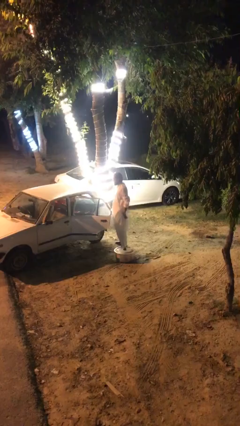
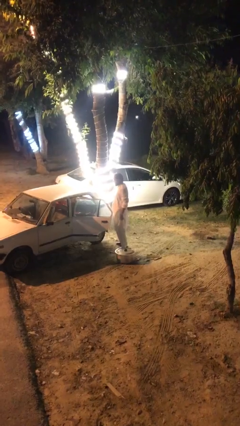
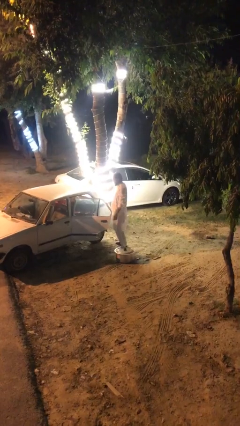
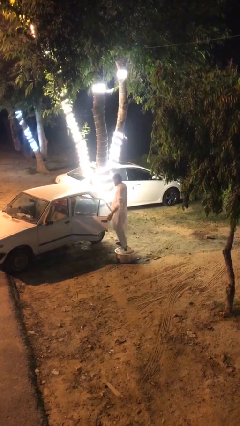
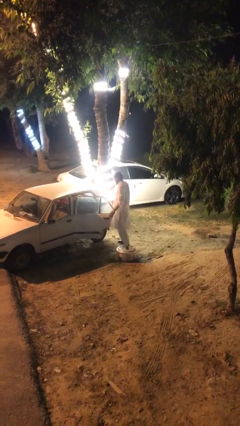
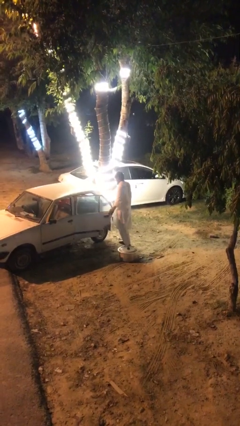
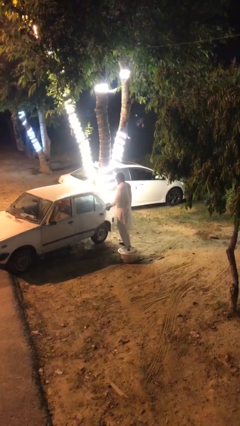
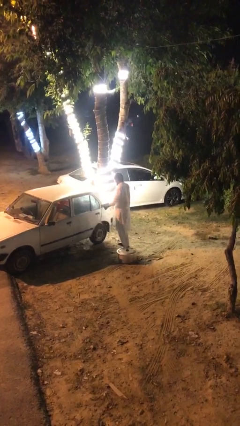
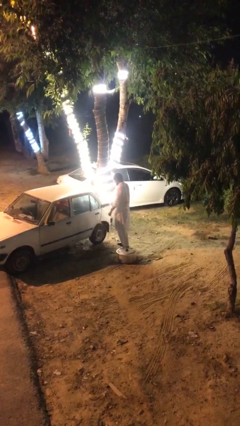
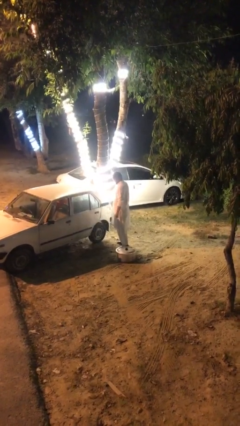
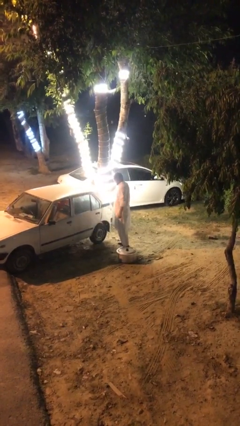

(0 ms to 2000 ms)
person closes car door

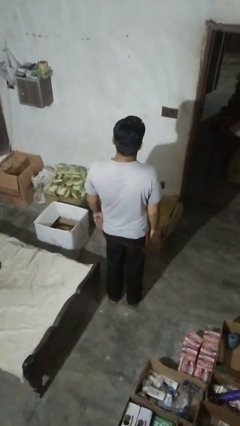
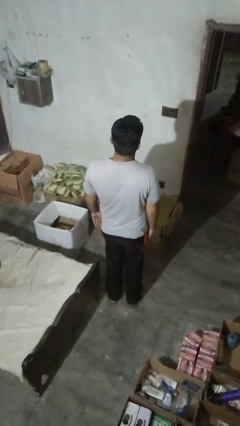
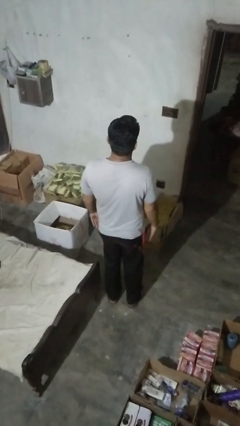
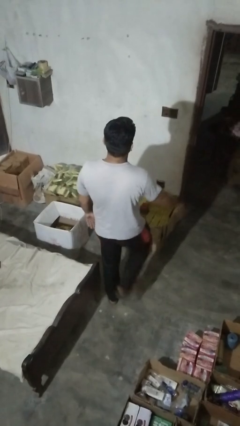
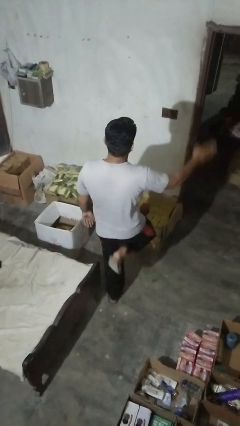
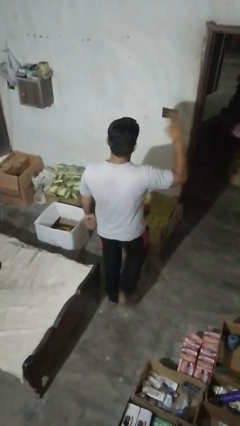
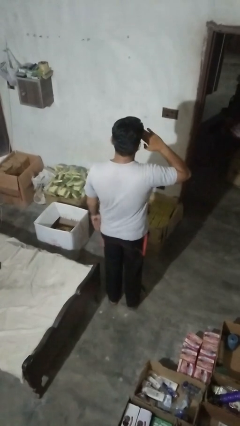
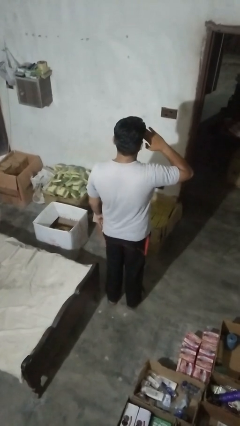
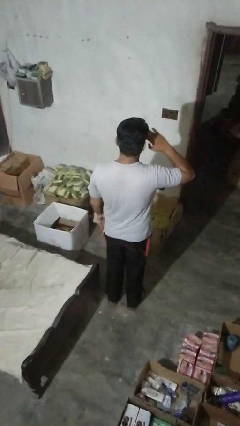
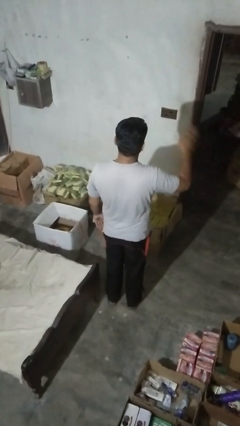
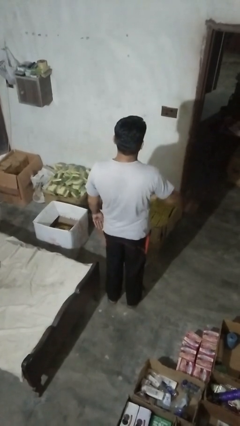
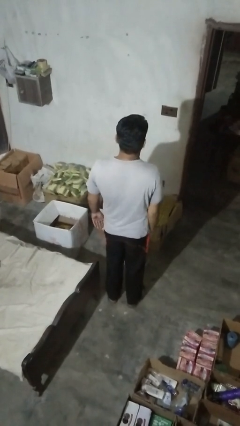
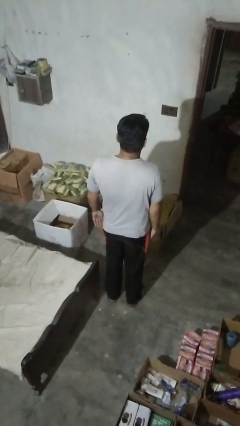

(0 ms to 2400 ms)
person salutes

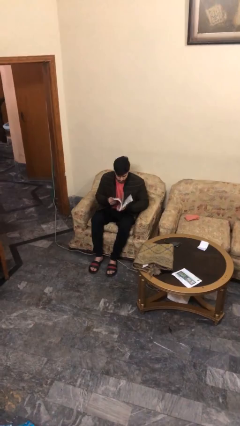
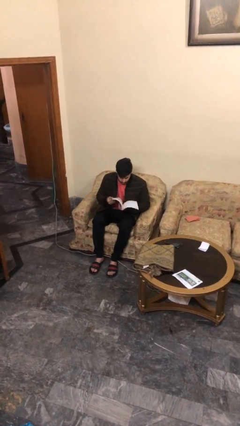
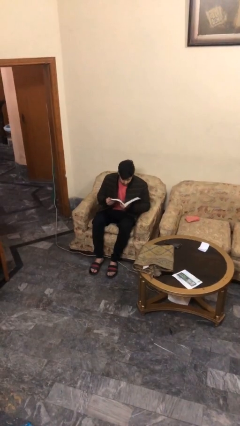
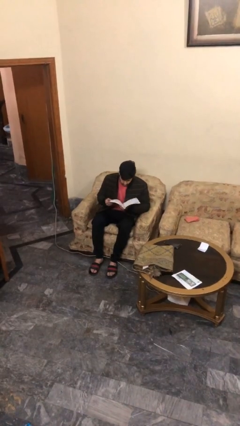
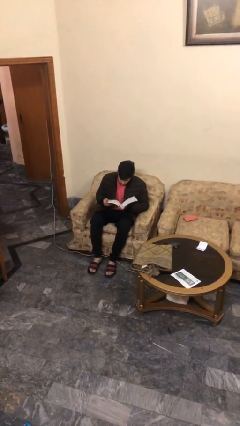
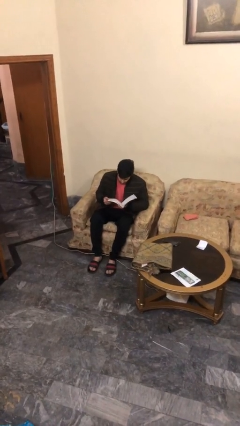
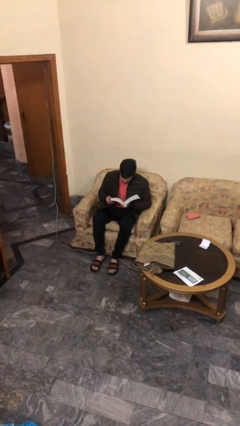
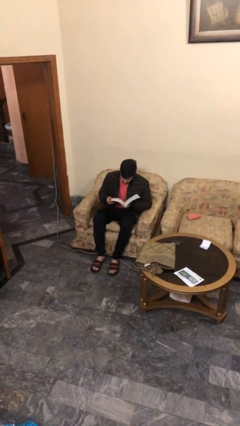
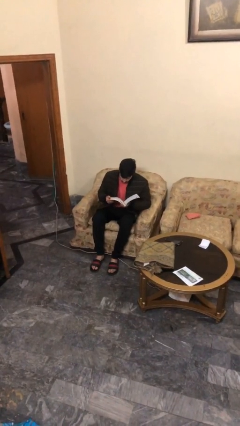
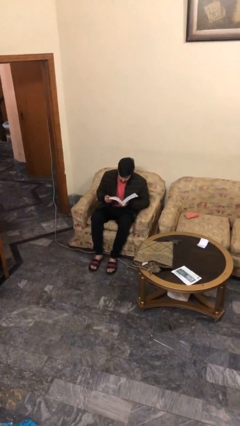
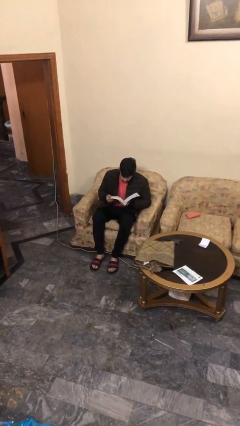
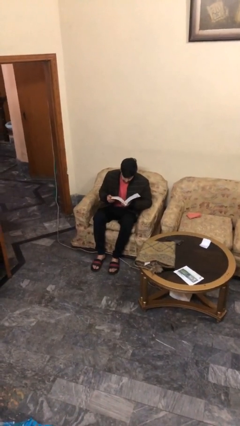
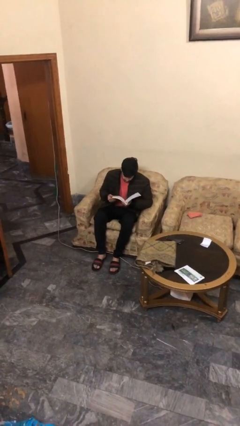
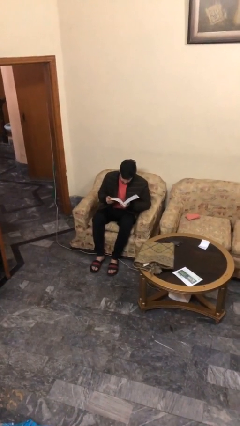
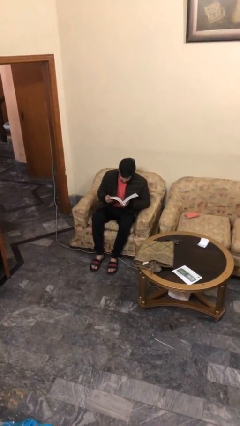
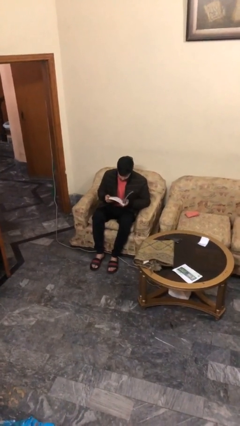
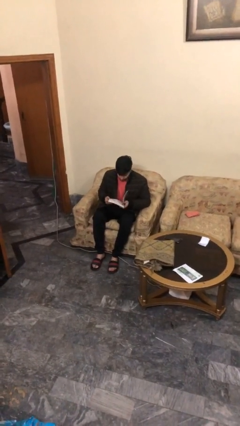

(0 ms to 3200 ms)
person reads document

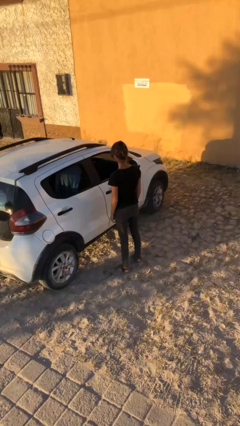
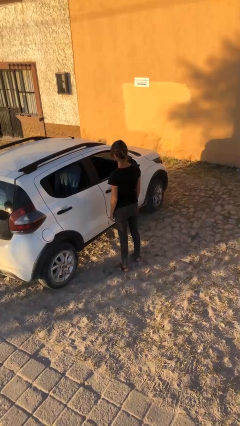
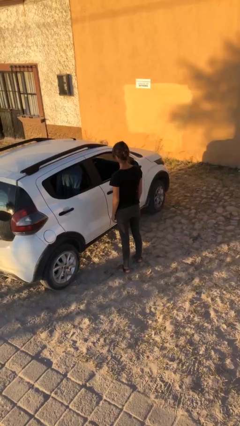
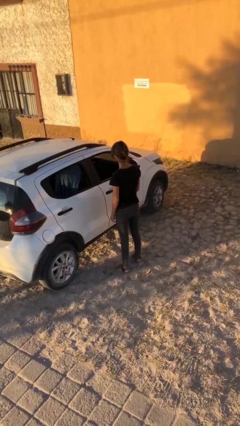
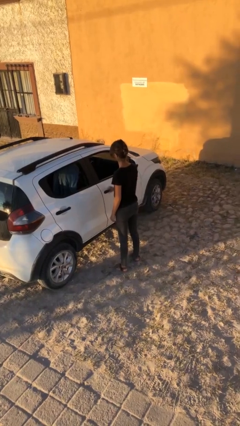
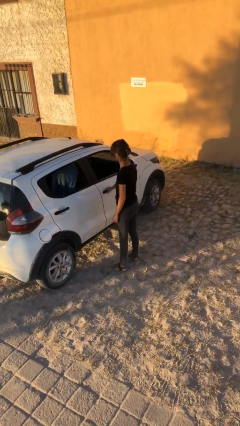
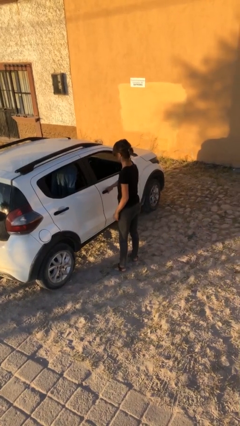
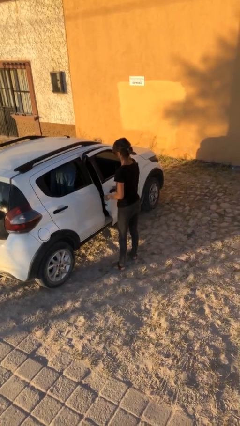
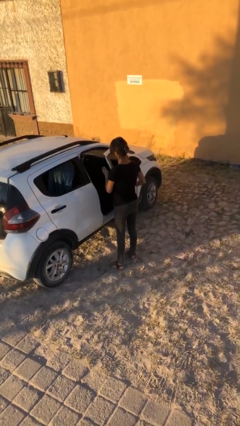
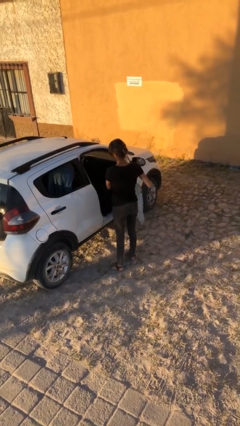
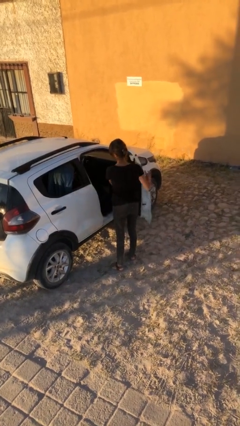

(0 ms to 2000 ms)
person opens car door

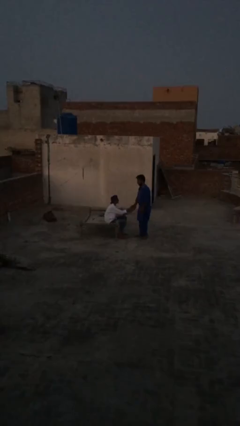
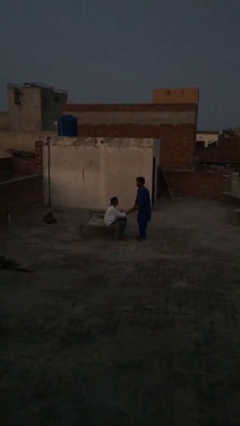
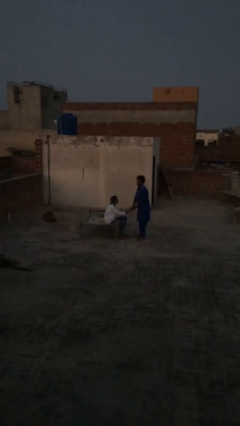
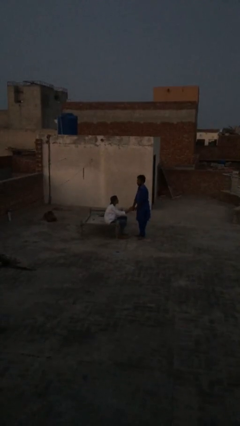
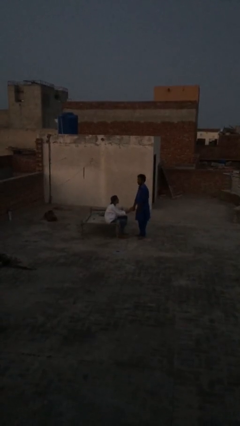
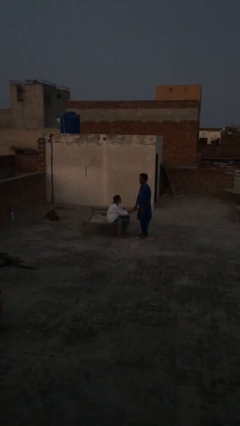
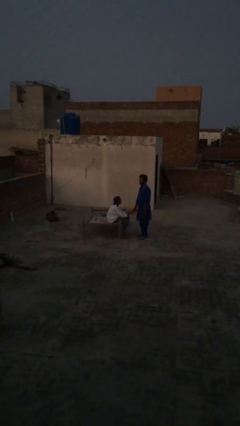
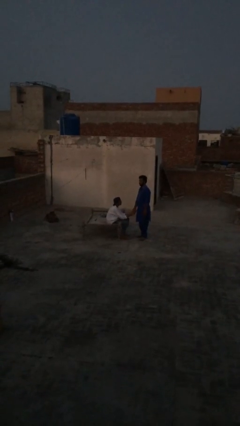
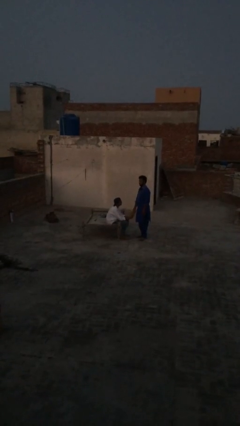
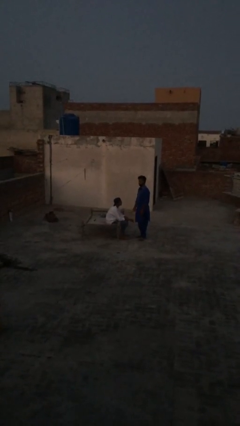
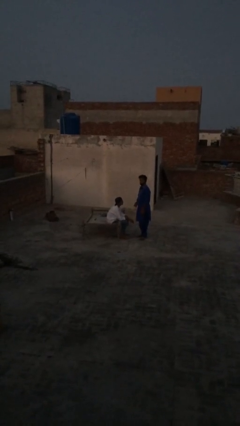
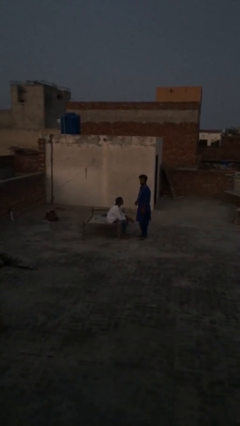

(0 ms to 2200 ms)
person shakes hand

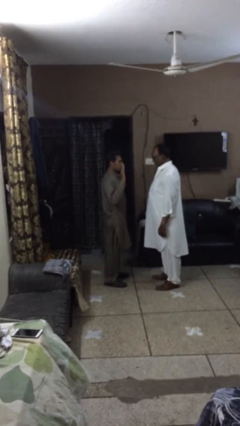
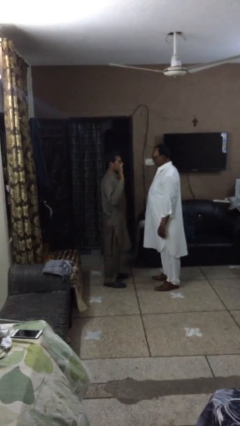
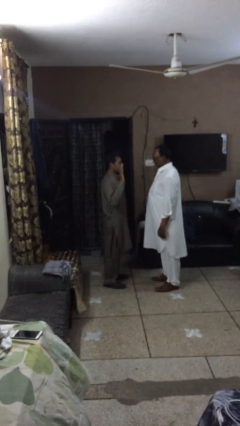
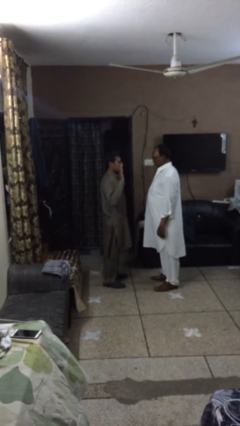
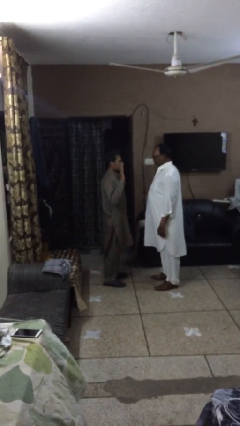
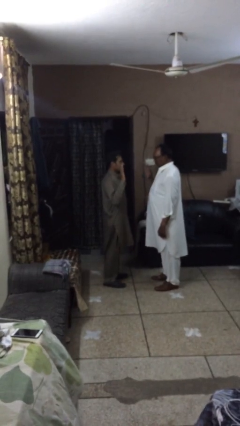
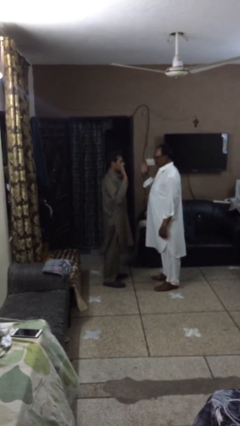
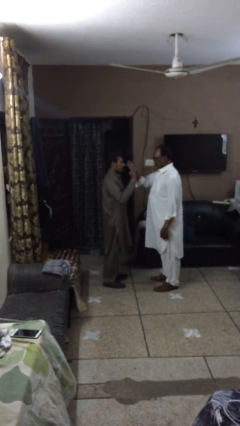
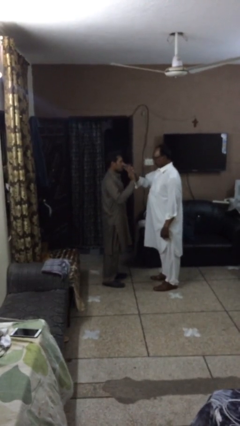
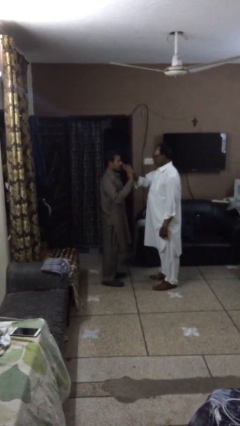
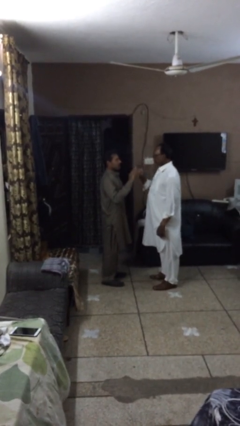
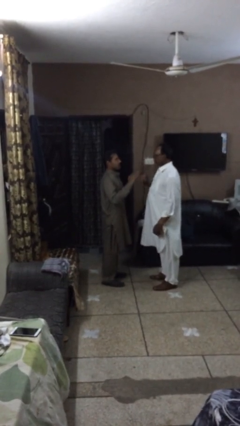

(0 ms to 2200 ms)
person highfives hand

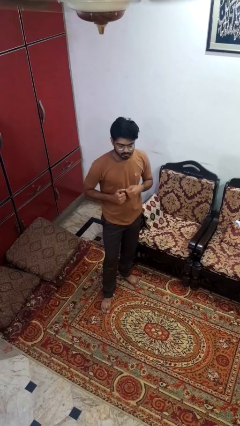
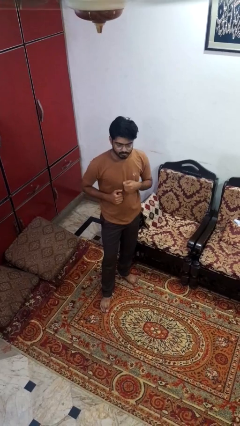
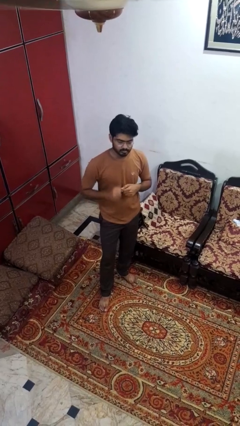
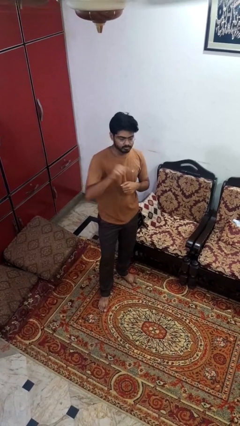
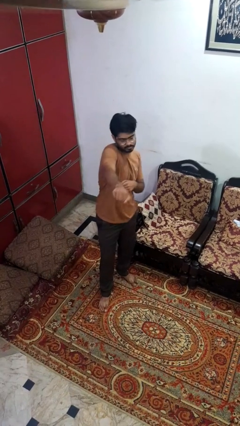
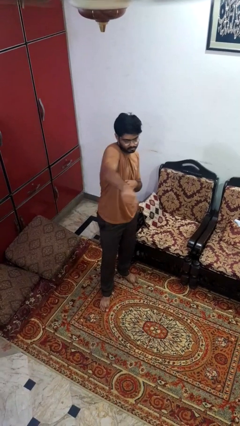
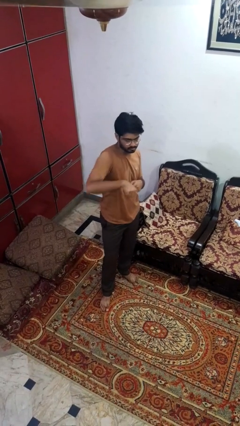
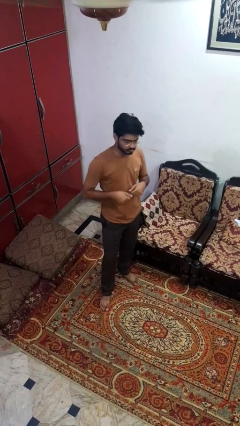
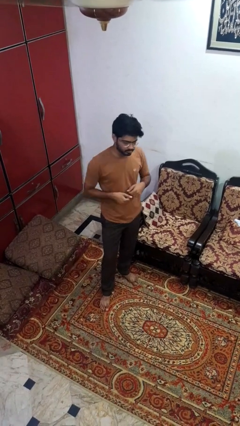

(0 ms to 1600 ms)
person punches

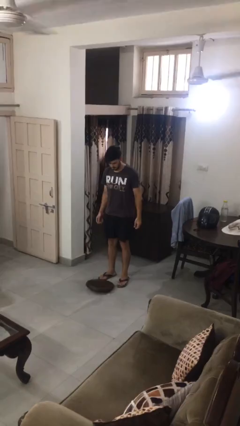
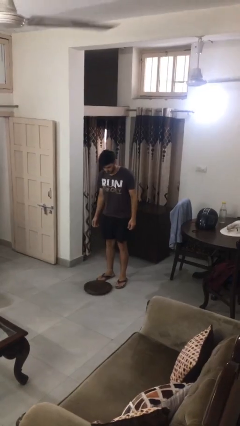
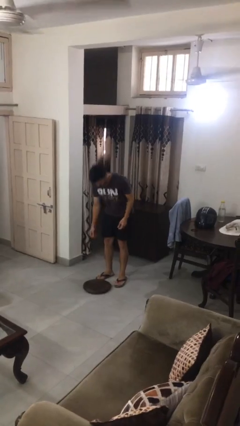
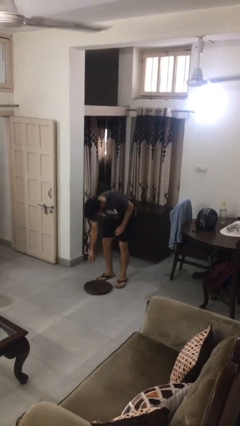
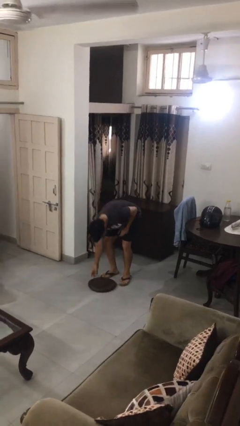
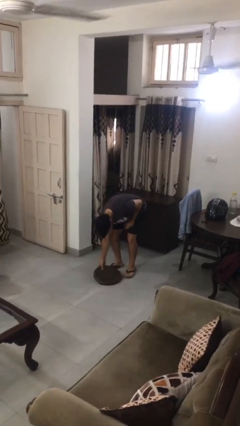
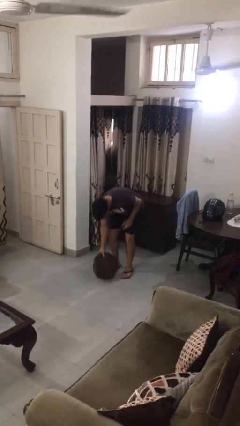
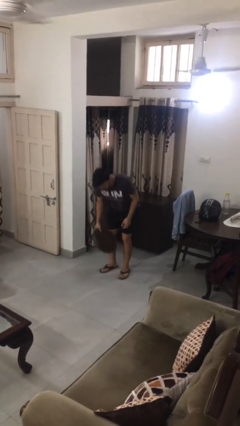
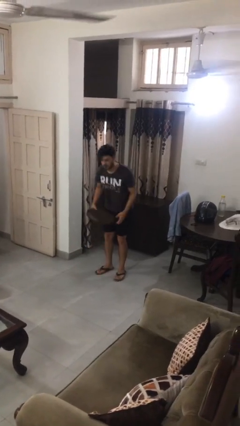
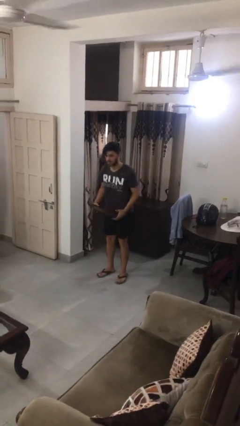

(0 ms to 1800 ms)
person picks up object from floor
